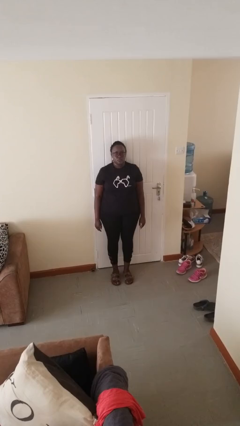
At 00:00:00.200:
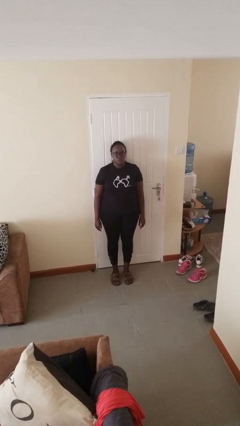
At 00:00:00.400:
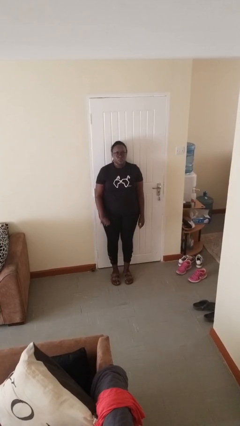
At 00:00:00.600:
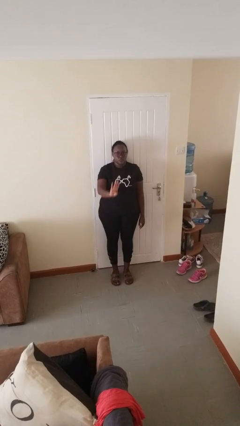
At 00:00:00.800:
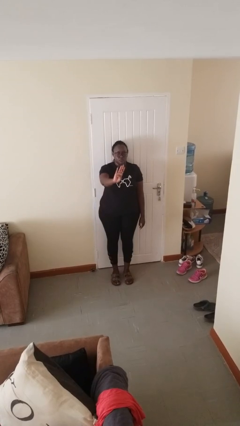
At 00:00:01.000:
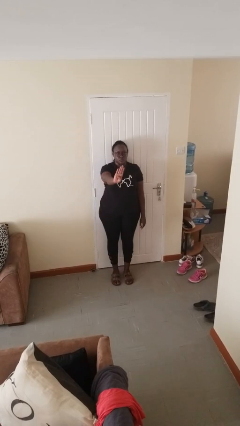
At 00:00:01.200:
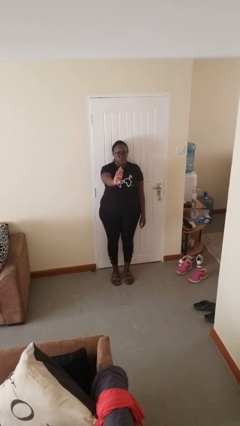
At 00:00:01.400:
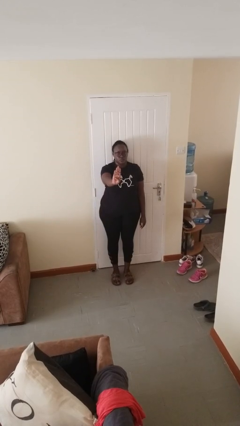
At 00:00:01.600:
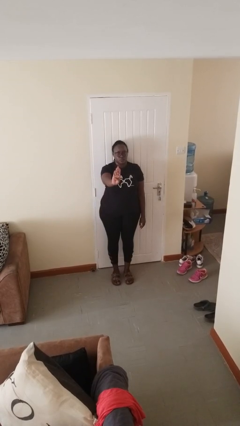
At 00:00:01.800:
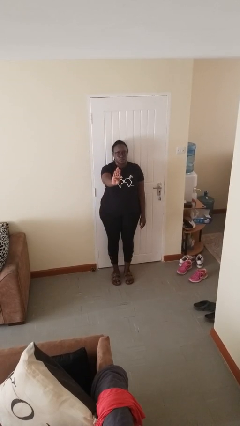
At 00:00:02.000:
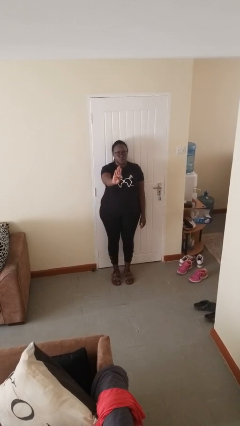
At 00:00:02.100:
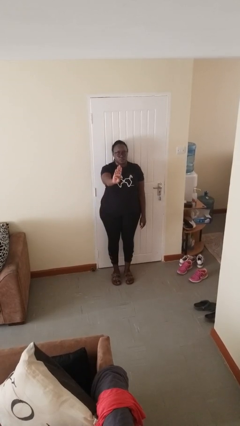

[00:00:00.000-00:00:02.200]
person gestures number four

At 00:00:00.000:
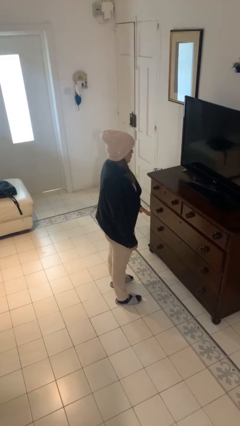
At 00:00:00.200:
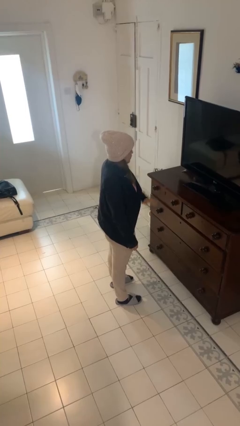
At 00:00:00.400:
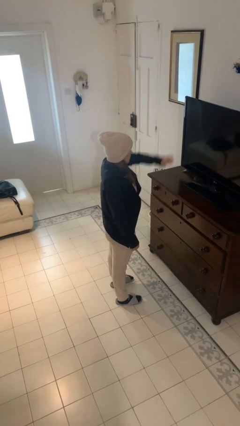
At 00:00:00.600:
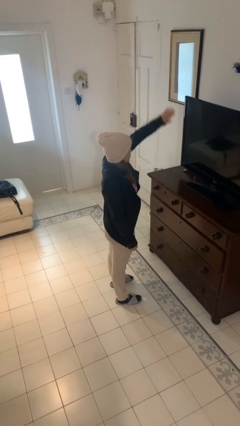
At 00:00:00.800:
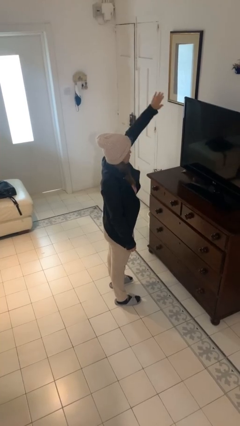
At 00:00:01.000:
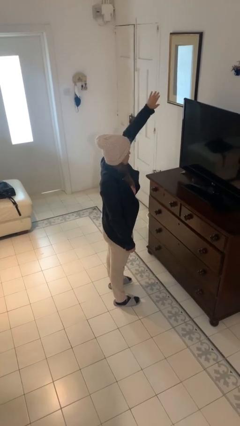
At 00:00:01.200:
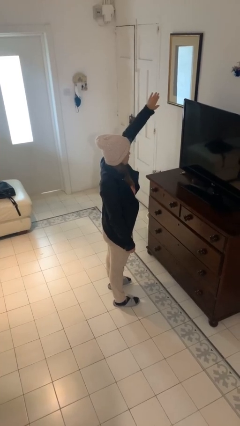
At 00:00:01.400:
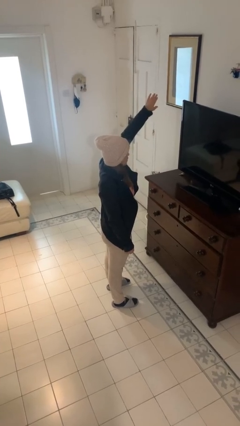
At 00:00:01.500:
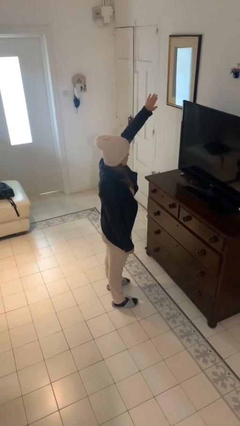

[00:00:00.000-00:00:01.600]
person gestures swipe up

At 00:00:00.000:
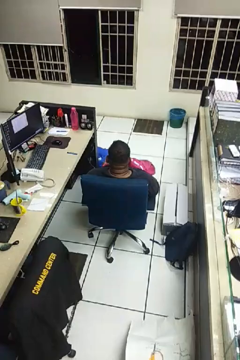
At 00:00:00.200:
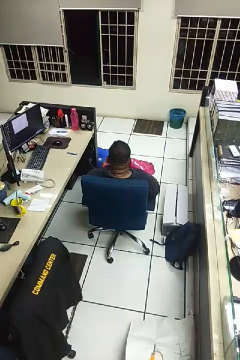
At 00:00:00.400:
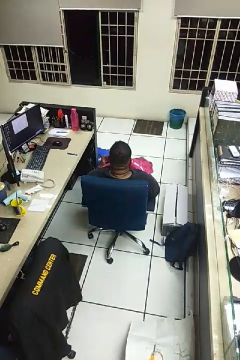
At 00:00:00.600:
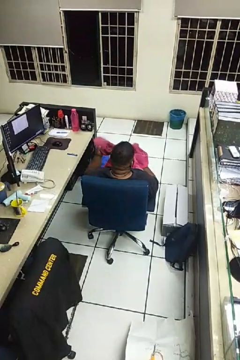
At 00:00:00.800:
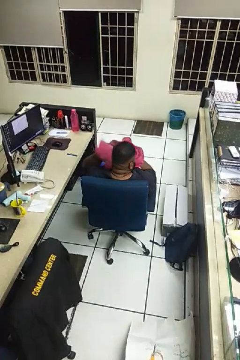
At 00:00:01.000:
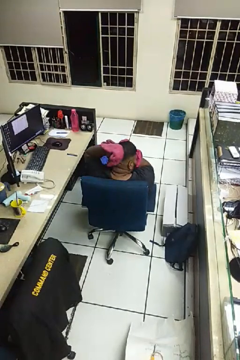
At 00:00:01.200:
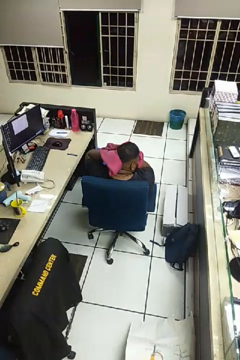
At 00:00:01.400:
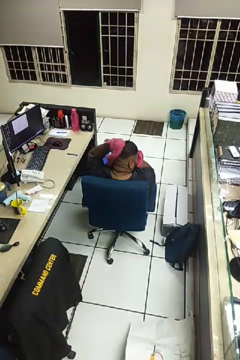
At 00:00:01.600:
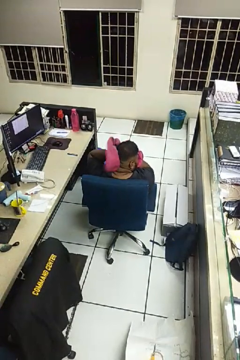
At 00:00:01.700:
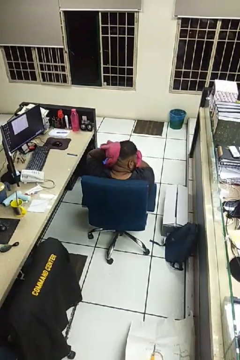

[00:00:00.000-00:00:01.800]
person dries hair with towel

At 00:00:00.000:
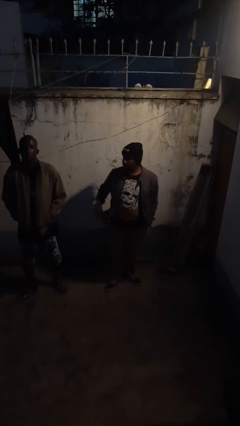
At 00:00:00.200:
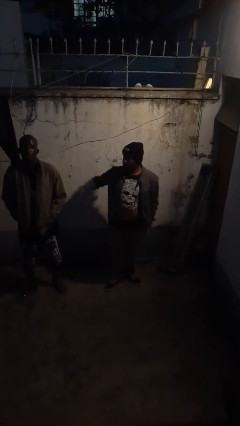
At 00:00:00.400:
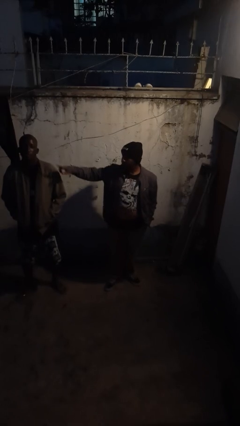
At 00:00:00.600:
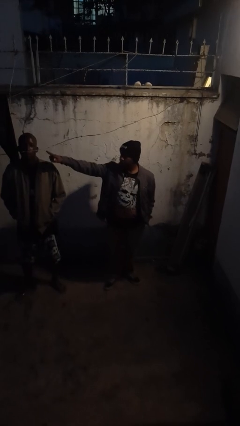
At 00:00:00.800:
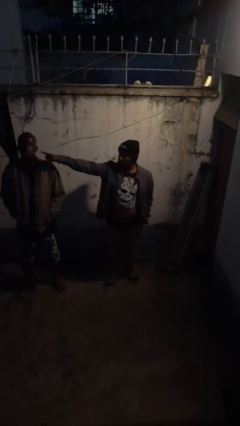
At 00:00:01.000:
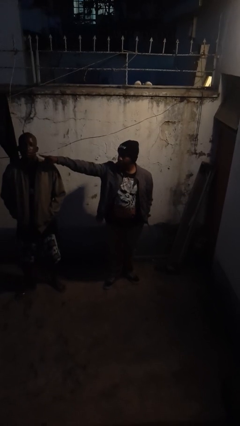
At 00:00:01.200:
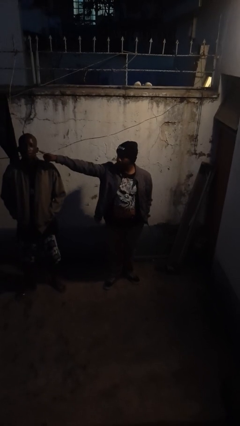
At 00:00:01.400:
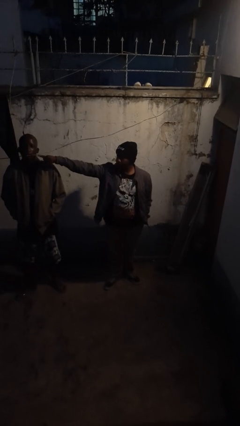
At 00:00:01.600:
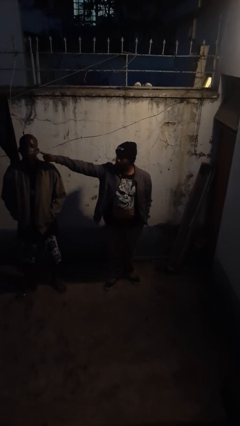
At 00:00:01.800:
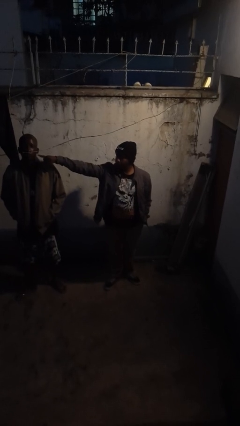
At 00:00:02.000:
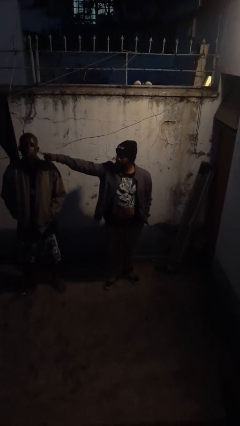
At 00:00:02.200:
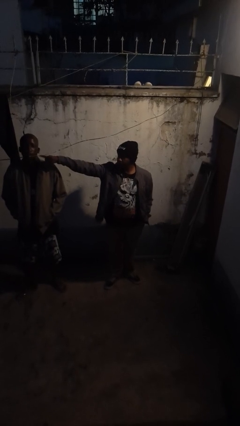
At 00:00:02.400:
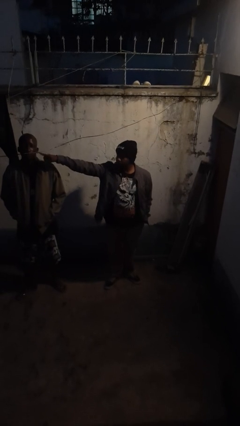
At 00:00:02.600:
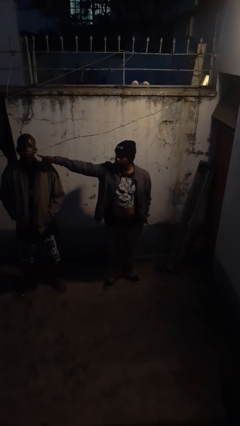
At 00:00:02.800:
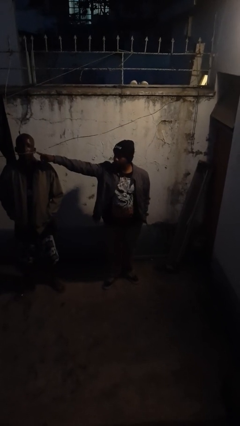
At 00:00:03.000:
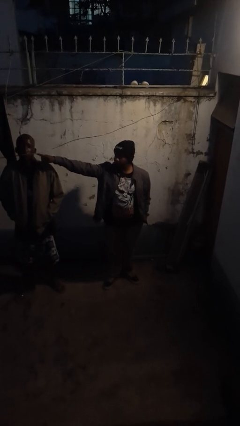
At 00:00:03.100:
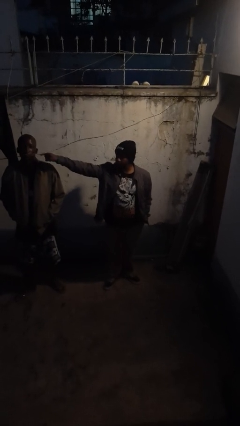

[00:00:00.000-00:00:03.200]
person touches face of person

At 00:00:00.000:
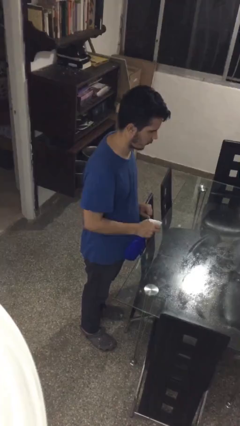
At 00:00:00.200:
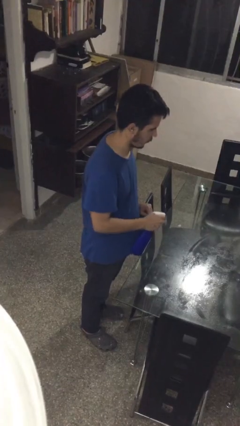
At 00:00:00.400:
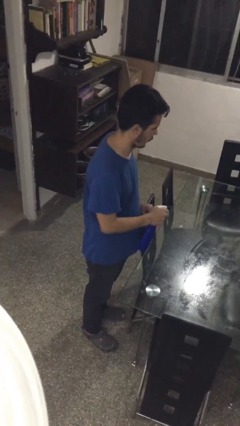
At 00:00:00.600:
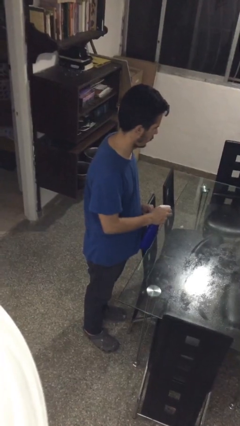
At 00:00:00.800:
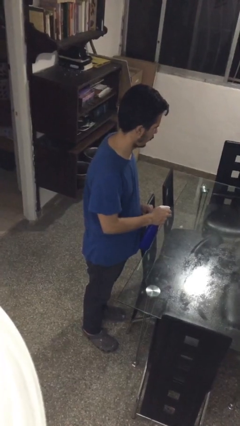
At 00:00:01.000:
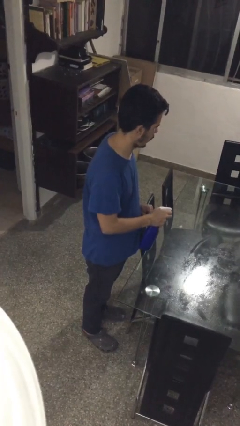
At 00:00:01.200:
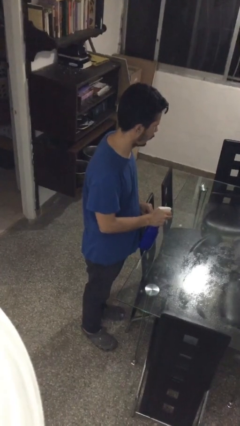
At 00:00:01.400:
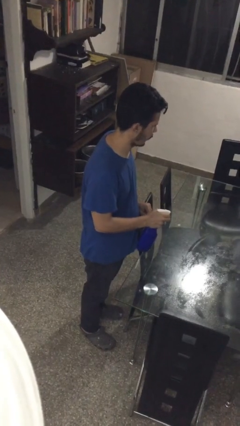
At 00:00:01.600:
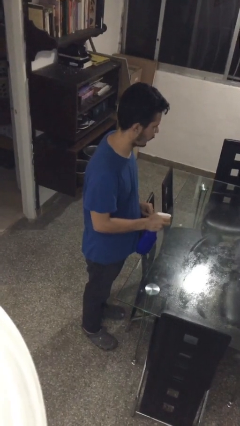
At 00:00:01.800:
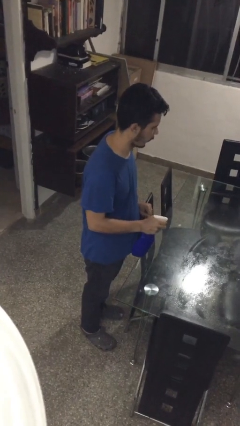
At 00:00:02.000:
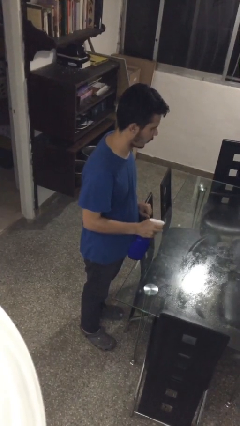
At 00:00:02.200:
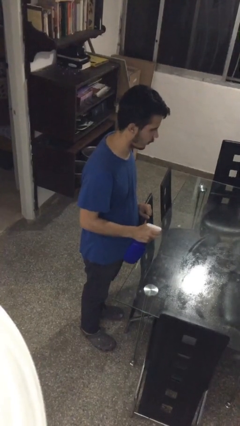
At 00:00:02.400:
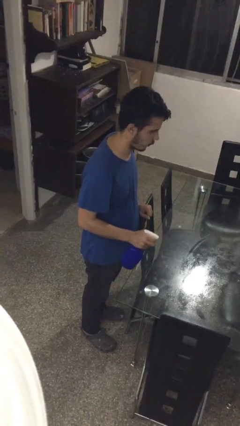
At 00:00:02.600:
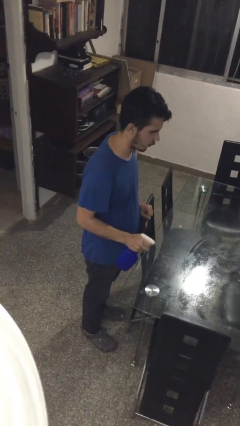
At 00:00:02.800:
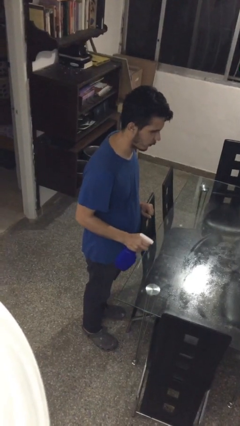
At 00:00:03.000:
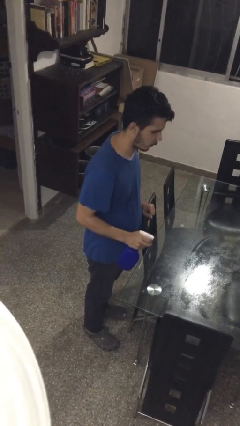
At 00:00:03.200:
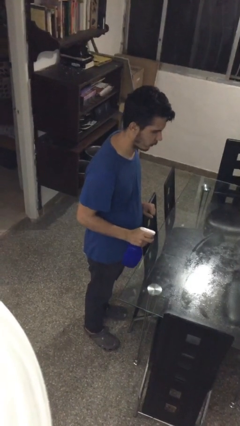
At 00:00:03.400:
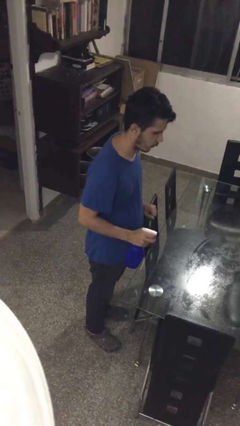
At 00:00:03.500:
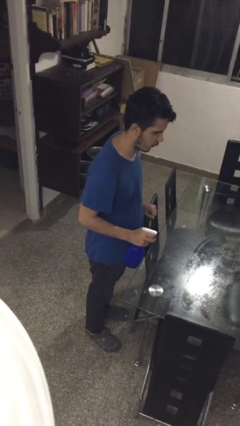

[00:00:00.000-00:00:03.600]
person sprays from bottle

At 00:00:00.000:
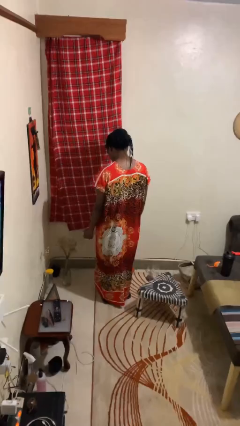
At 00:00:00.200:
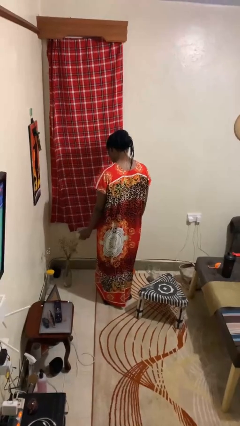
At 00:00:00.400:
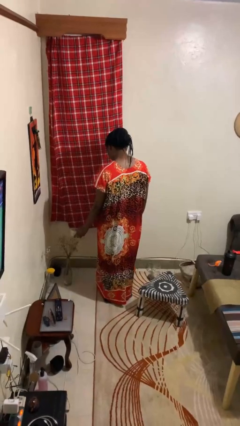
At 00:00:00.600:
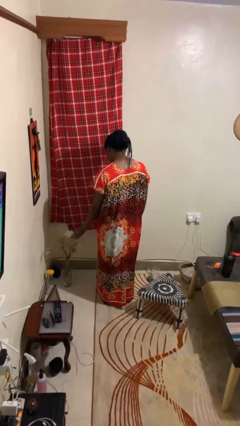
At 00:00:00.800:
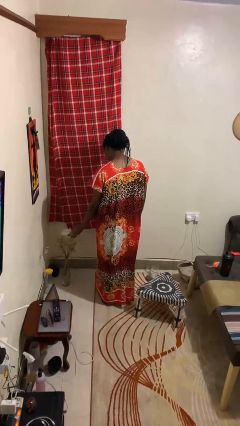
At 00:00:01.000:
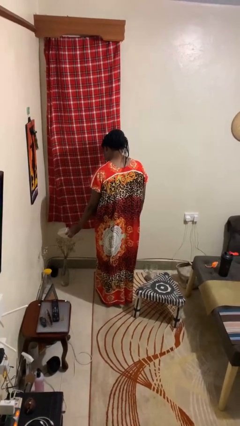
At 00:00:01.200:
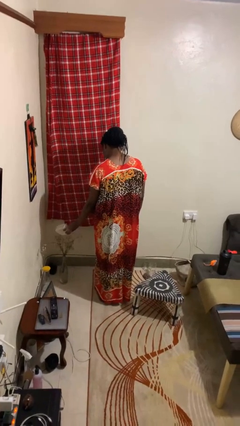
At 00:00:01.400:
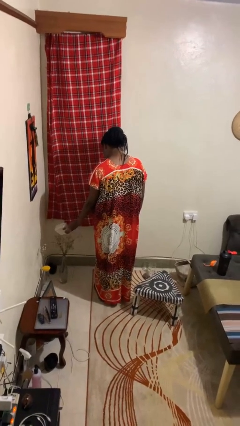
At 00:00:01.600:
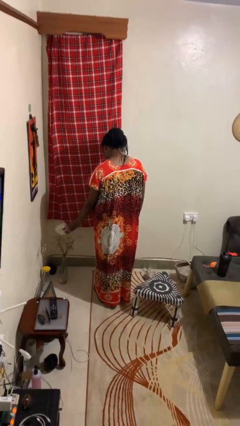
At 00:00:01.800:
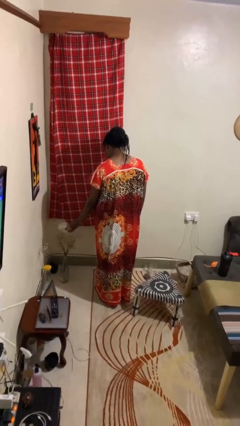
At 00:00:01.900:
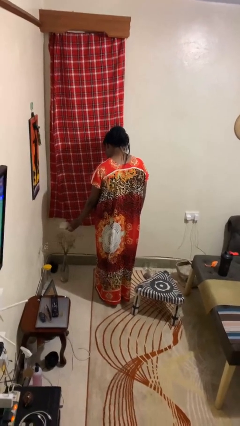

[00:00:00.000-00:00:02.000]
person waters houseplant

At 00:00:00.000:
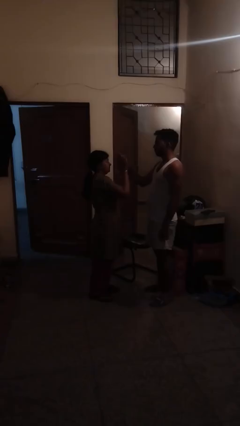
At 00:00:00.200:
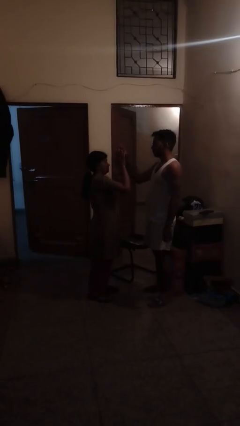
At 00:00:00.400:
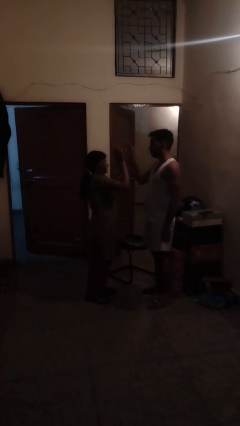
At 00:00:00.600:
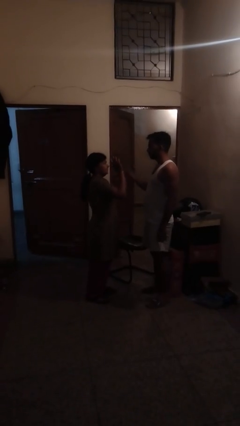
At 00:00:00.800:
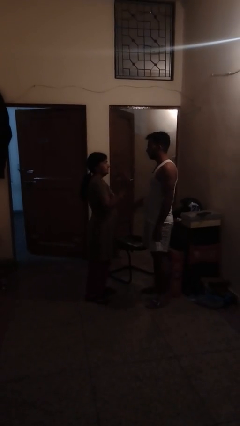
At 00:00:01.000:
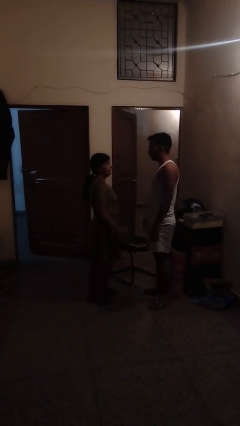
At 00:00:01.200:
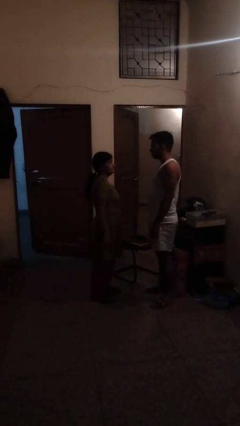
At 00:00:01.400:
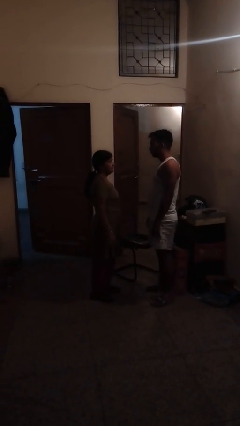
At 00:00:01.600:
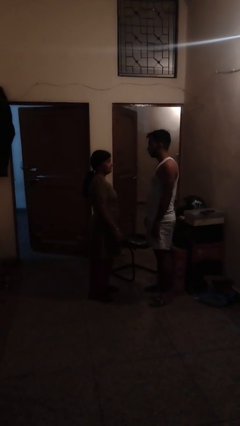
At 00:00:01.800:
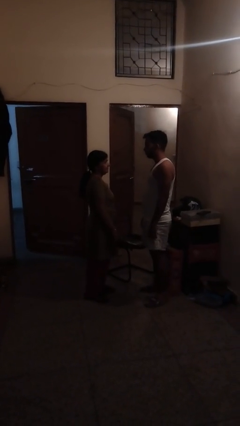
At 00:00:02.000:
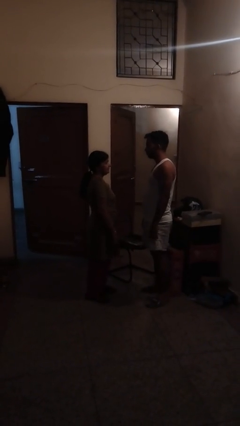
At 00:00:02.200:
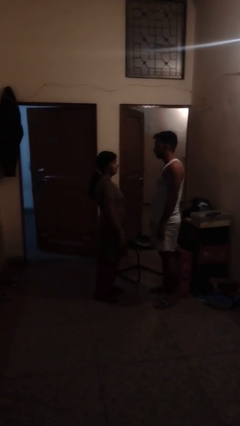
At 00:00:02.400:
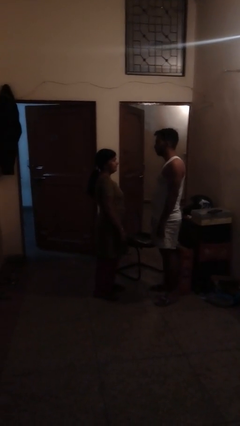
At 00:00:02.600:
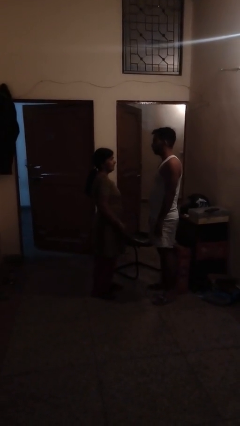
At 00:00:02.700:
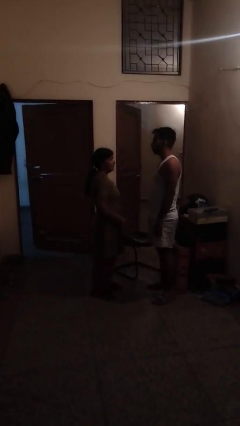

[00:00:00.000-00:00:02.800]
person highfives hand
